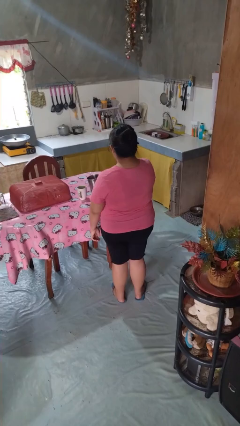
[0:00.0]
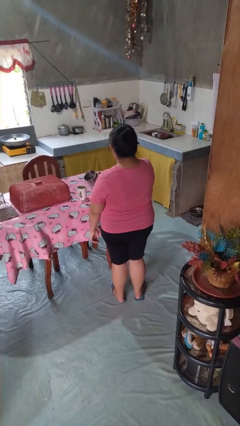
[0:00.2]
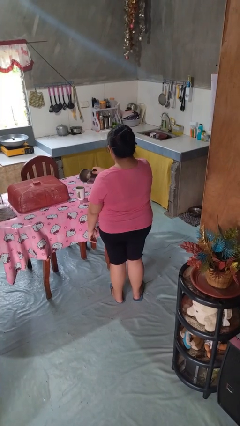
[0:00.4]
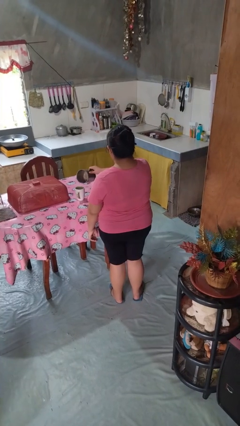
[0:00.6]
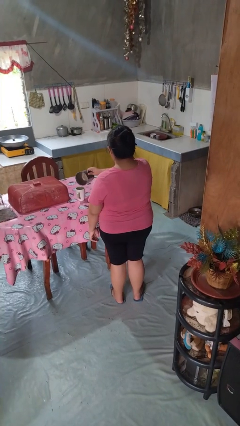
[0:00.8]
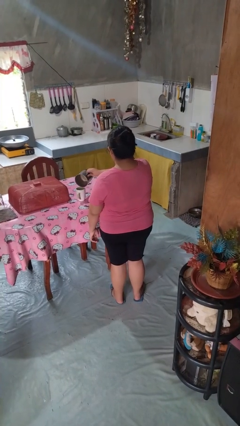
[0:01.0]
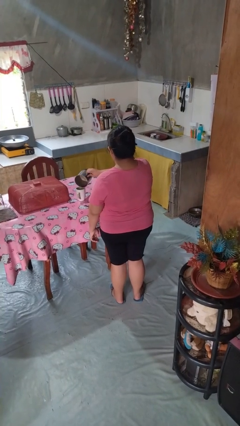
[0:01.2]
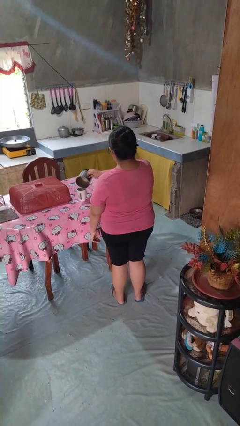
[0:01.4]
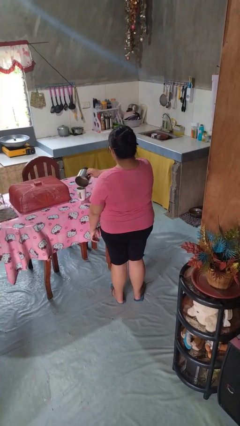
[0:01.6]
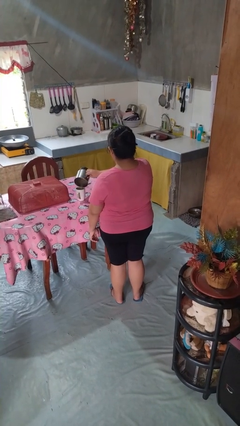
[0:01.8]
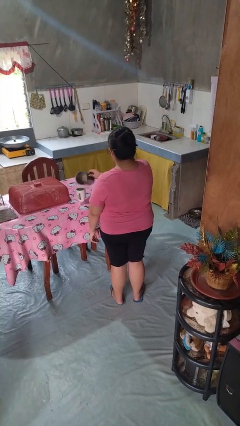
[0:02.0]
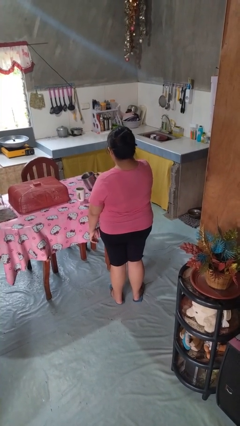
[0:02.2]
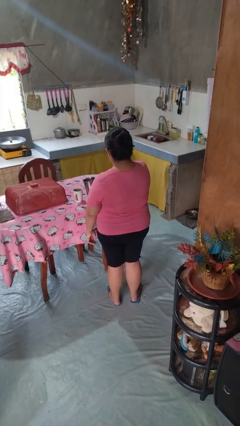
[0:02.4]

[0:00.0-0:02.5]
person pours coffee into mug

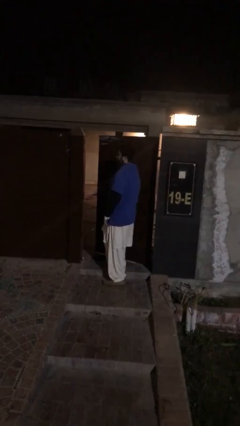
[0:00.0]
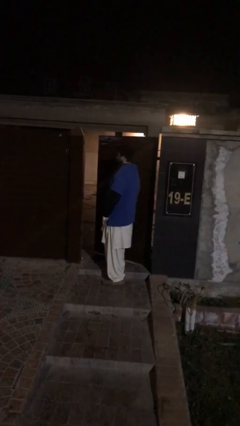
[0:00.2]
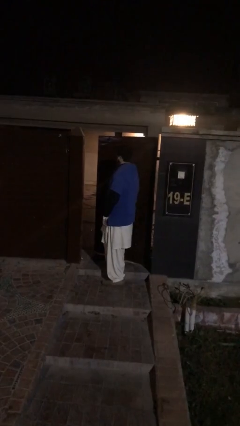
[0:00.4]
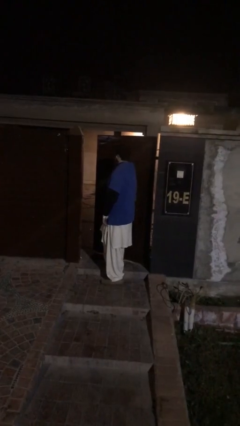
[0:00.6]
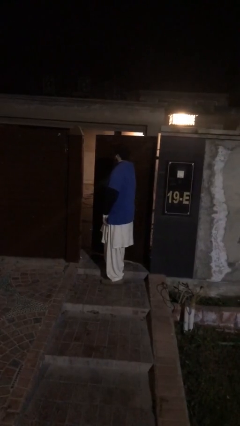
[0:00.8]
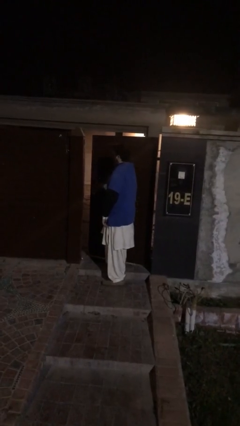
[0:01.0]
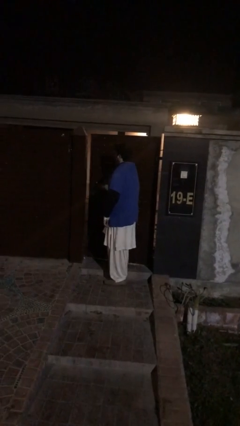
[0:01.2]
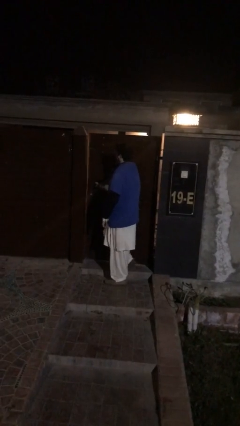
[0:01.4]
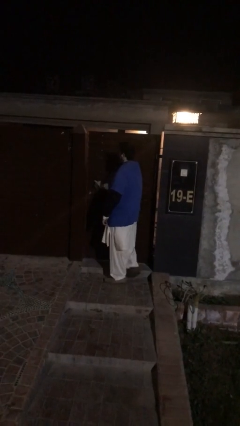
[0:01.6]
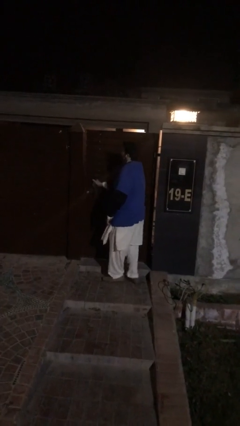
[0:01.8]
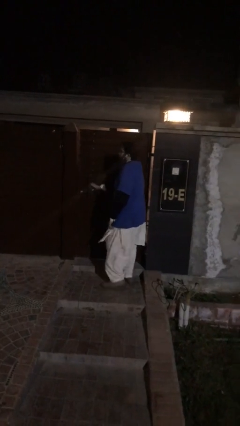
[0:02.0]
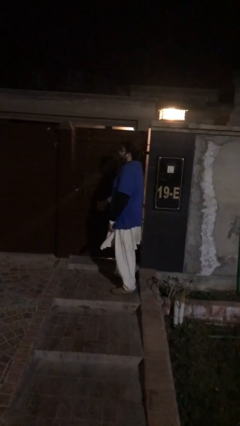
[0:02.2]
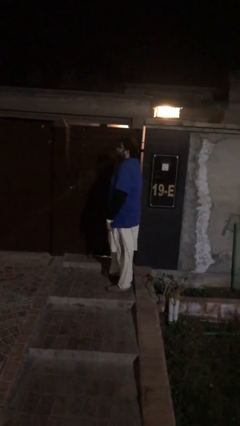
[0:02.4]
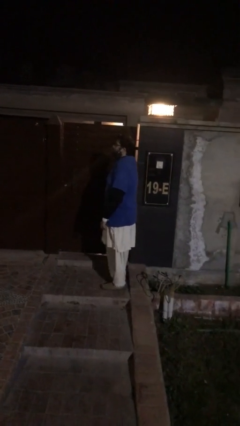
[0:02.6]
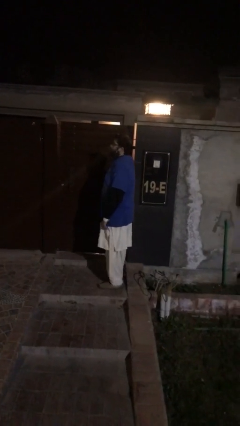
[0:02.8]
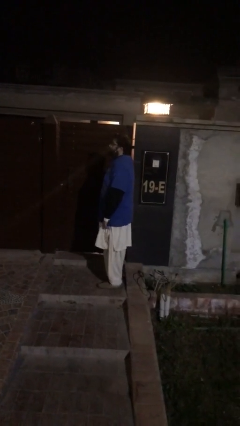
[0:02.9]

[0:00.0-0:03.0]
person closes facility door

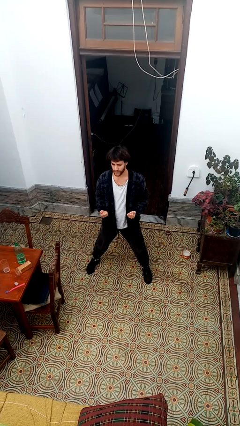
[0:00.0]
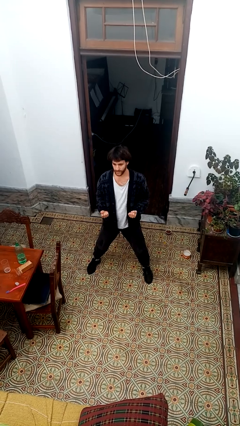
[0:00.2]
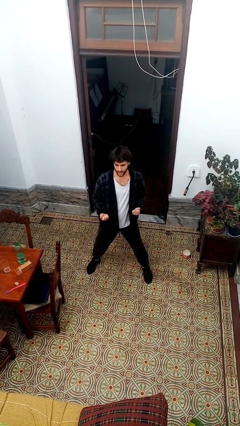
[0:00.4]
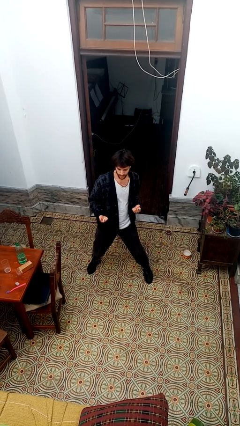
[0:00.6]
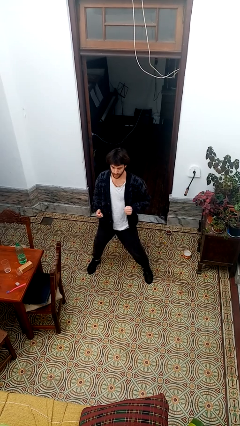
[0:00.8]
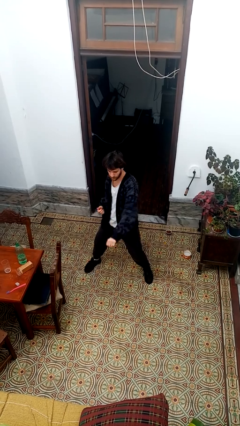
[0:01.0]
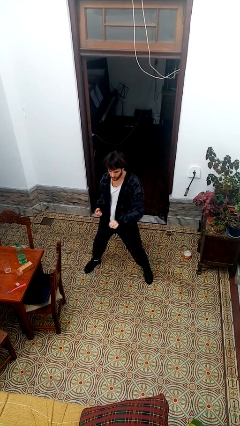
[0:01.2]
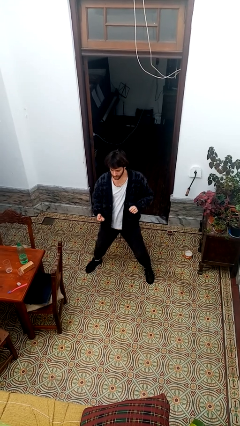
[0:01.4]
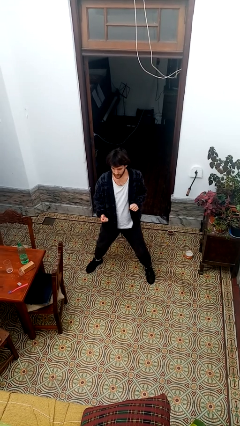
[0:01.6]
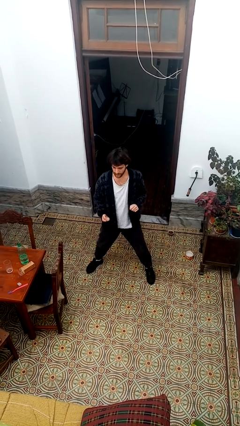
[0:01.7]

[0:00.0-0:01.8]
person punches

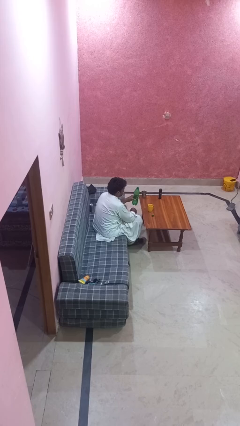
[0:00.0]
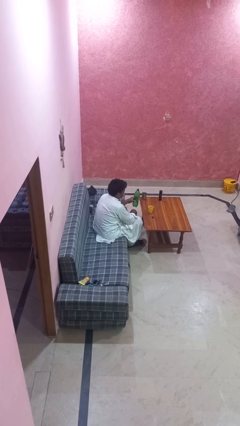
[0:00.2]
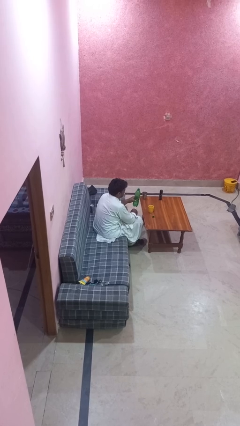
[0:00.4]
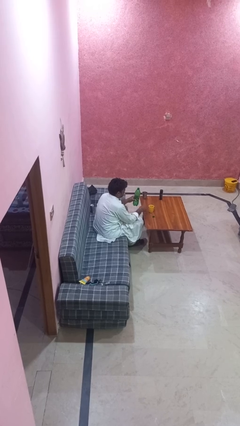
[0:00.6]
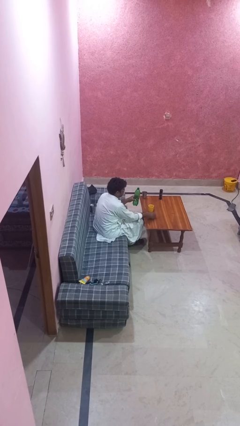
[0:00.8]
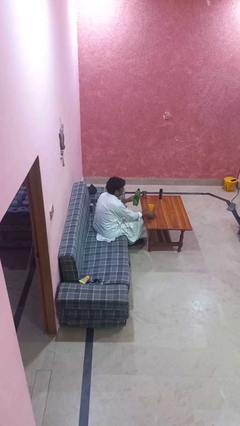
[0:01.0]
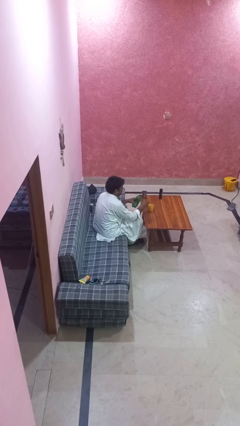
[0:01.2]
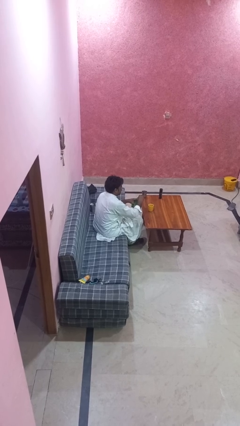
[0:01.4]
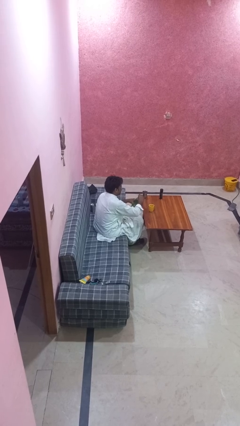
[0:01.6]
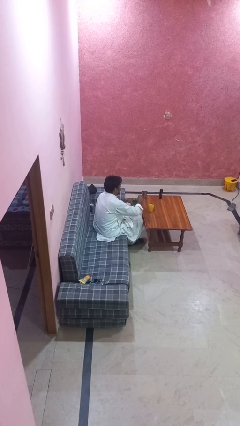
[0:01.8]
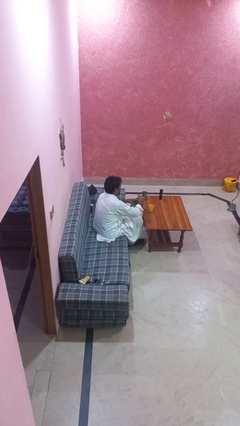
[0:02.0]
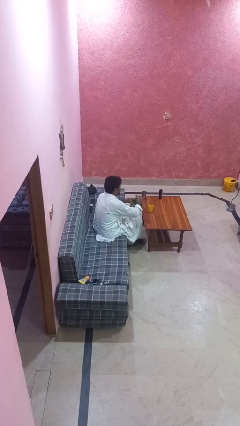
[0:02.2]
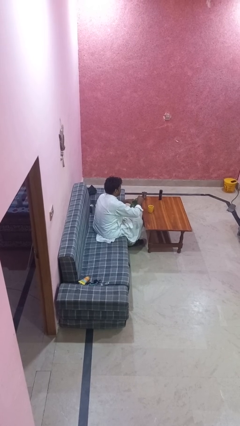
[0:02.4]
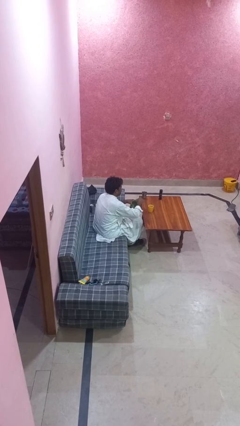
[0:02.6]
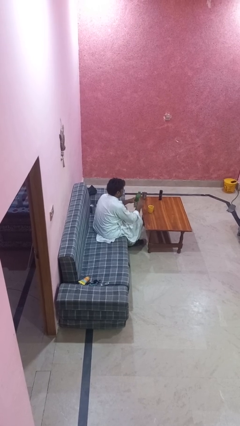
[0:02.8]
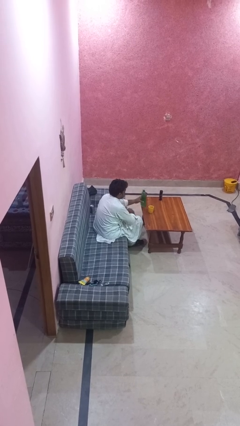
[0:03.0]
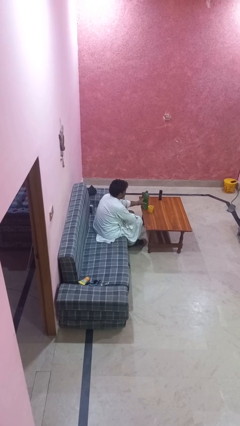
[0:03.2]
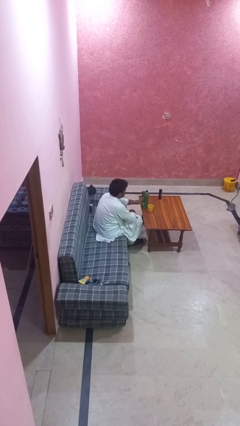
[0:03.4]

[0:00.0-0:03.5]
person screws lid to bottle

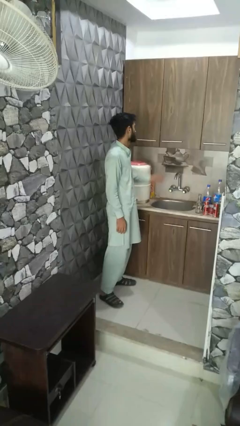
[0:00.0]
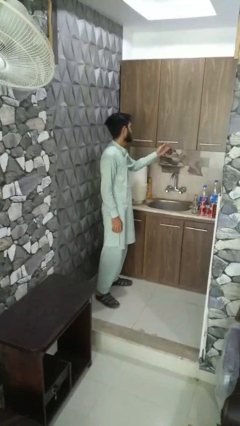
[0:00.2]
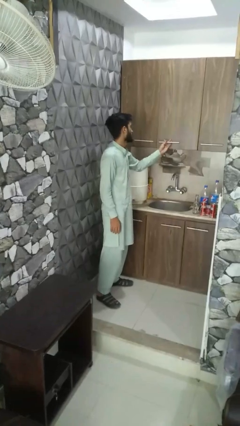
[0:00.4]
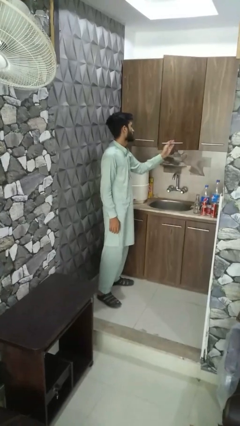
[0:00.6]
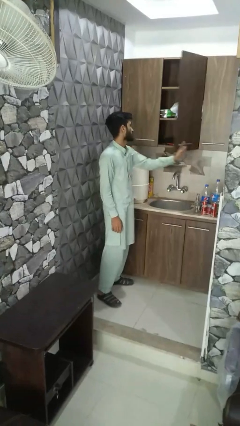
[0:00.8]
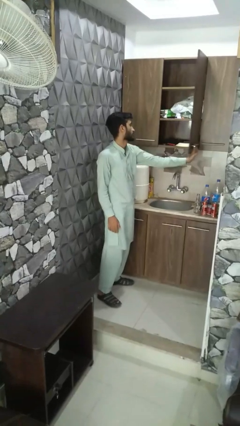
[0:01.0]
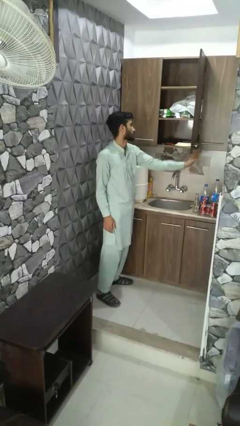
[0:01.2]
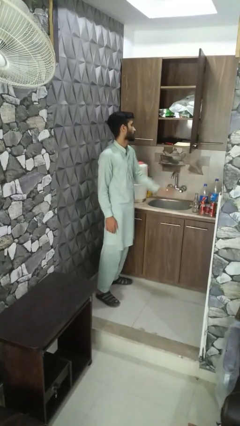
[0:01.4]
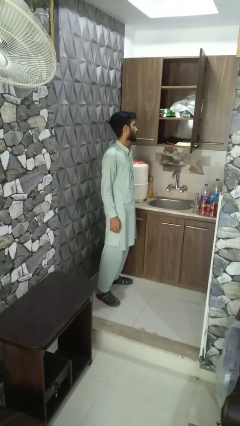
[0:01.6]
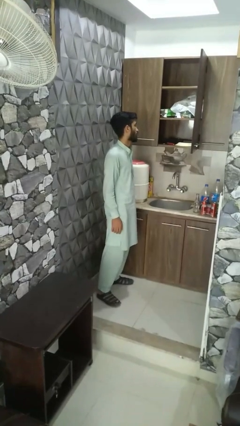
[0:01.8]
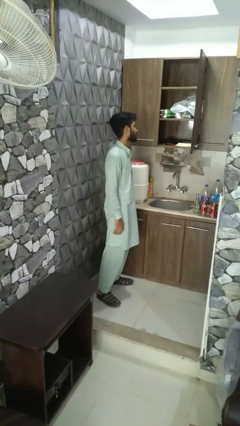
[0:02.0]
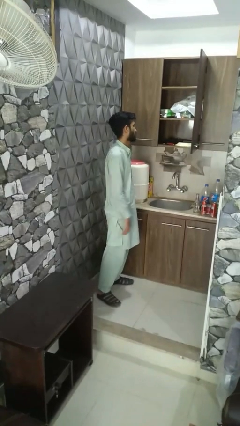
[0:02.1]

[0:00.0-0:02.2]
person opens cabinet

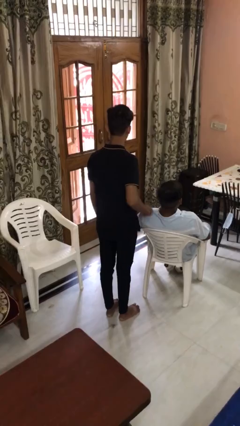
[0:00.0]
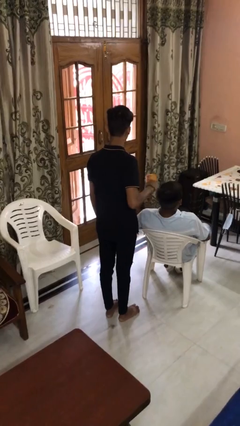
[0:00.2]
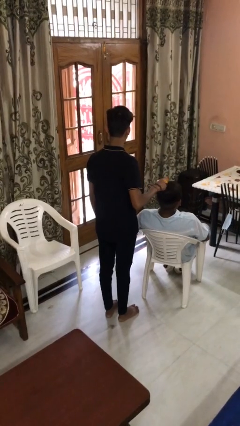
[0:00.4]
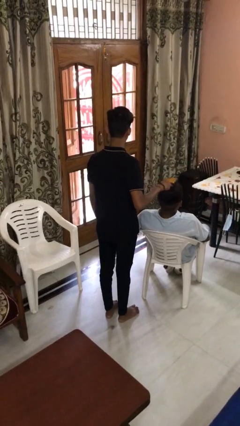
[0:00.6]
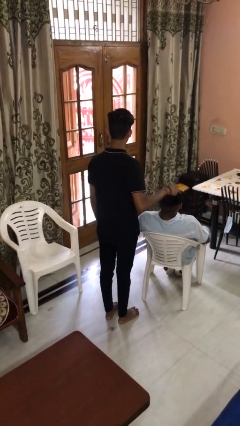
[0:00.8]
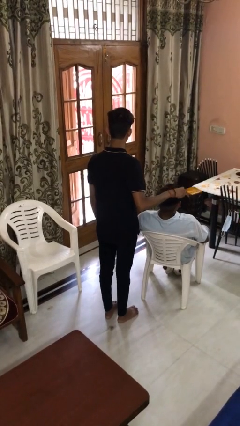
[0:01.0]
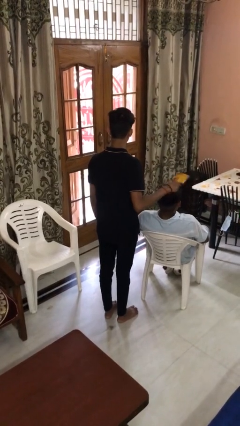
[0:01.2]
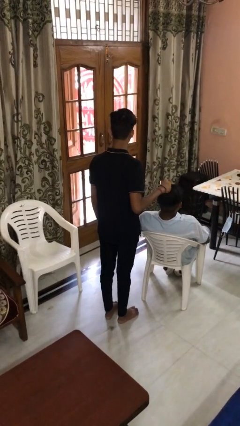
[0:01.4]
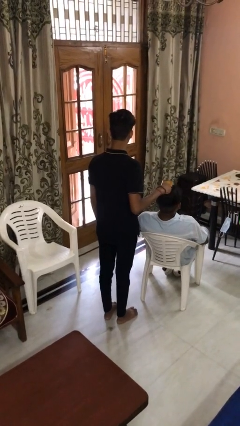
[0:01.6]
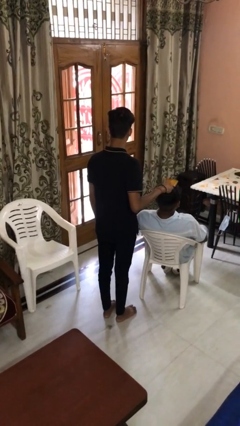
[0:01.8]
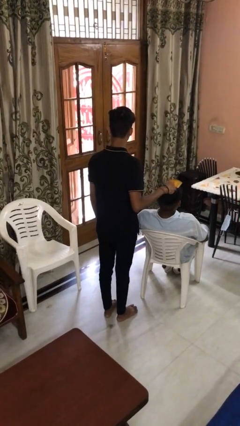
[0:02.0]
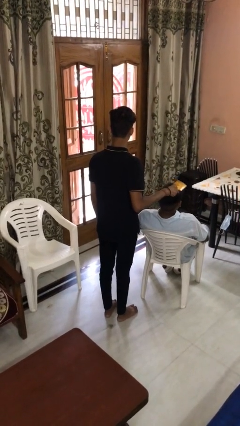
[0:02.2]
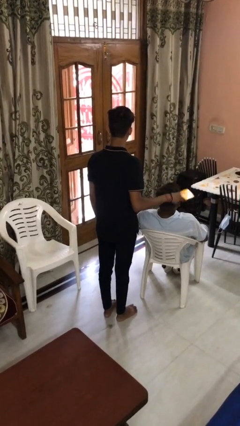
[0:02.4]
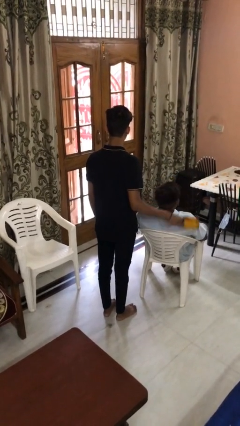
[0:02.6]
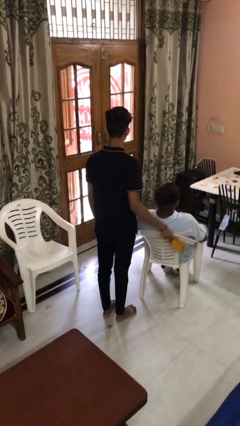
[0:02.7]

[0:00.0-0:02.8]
person brushes hair of person

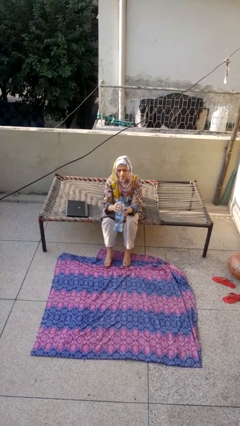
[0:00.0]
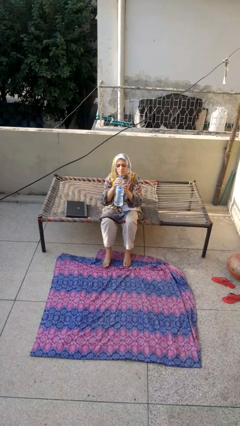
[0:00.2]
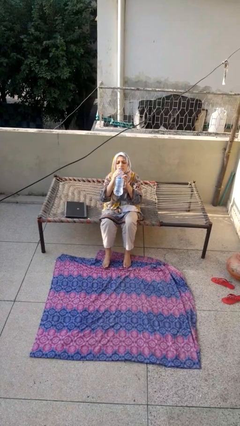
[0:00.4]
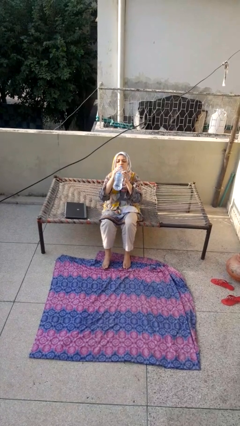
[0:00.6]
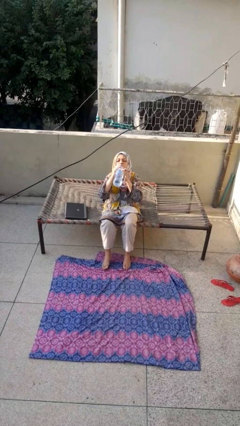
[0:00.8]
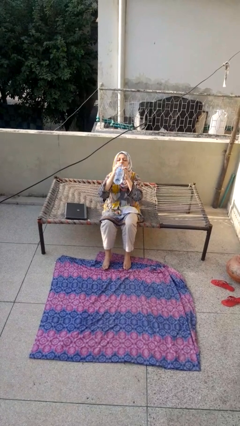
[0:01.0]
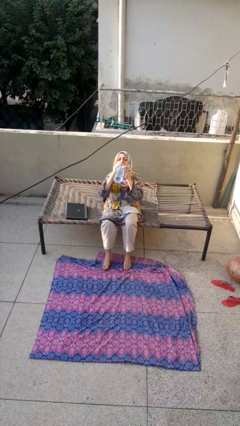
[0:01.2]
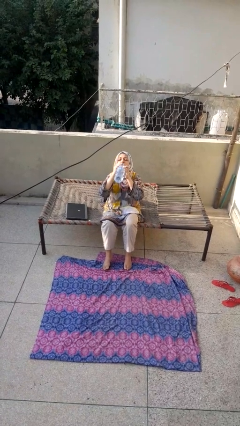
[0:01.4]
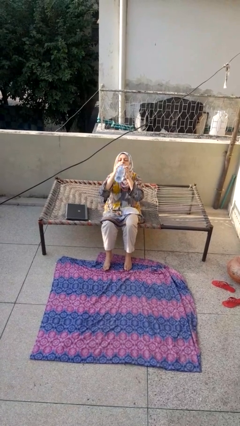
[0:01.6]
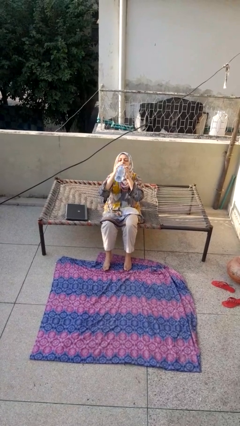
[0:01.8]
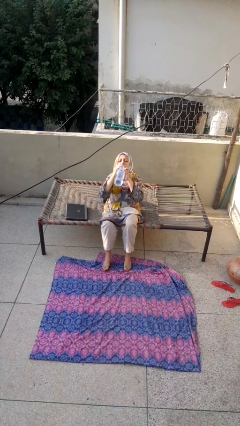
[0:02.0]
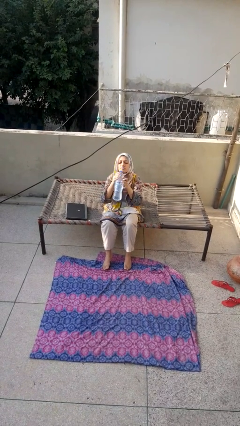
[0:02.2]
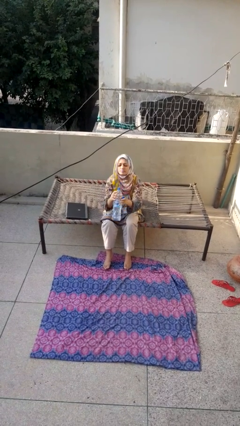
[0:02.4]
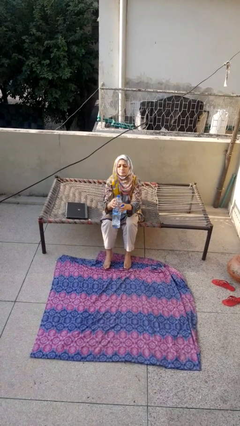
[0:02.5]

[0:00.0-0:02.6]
person drinks from bottle
